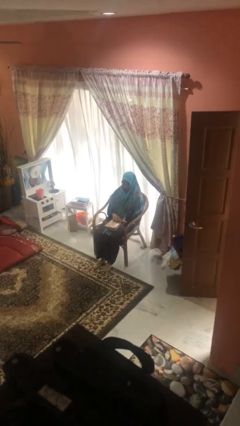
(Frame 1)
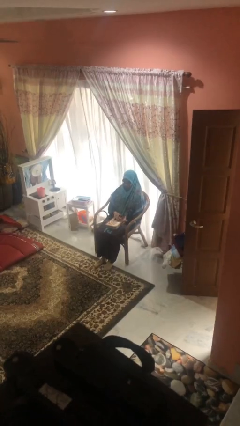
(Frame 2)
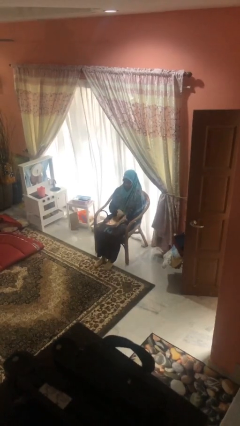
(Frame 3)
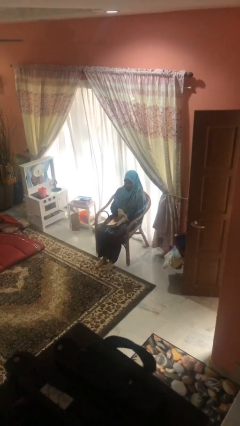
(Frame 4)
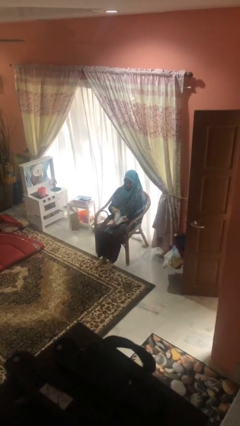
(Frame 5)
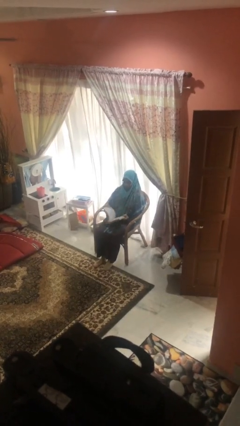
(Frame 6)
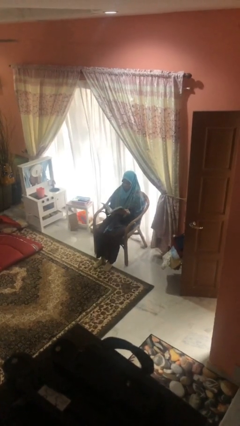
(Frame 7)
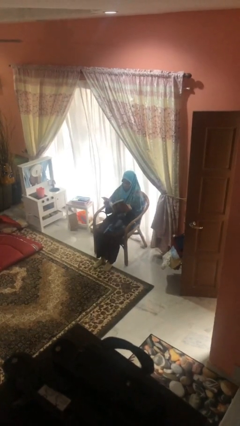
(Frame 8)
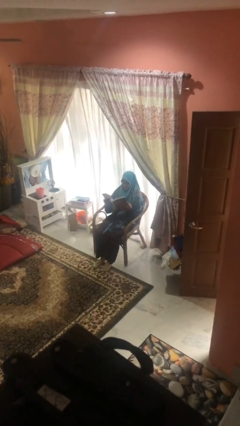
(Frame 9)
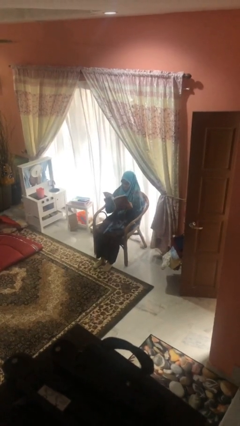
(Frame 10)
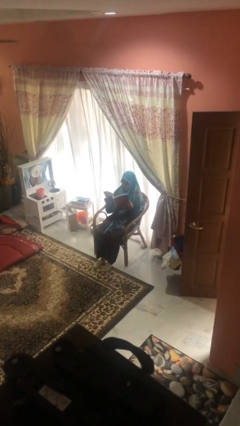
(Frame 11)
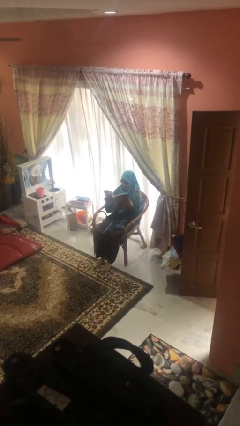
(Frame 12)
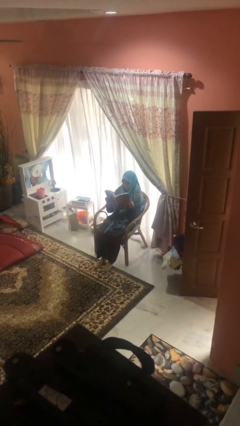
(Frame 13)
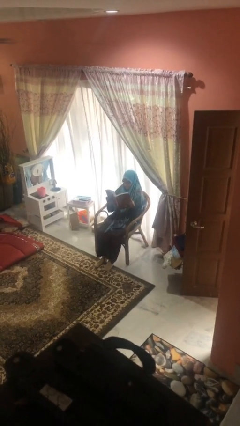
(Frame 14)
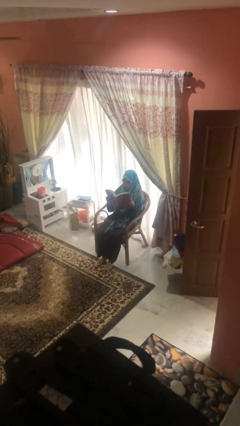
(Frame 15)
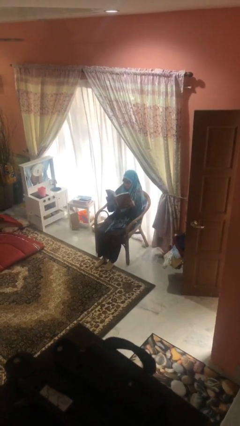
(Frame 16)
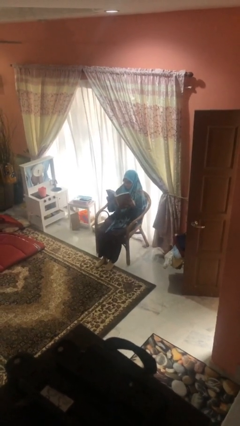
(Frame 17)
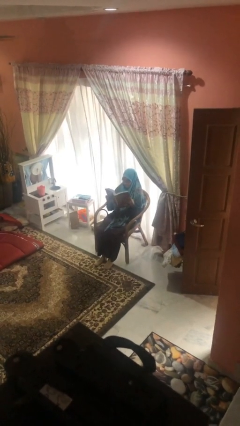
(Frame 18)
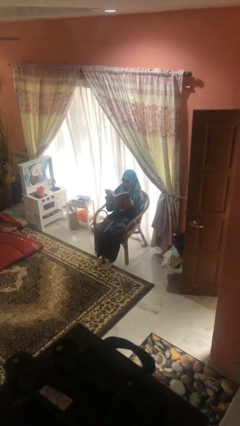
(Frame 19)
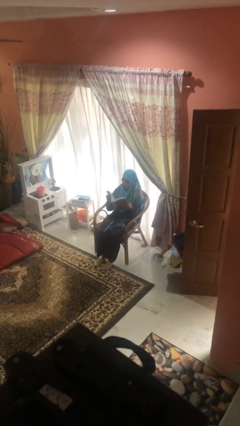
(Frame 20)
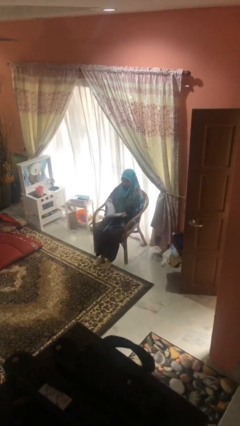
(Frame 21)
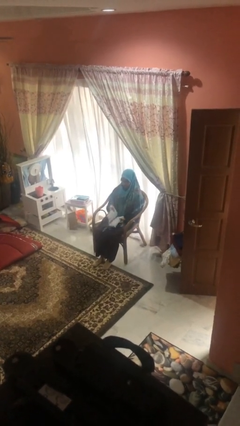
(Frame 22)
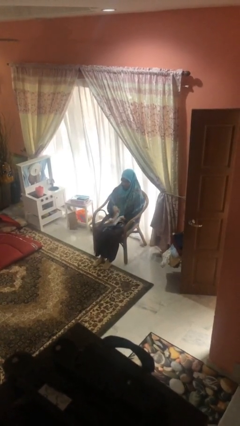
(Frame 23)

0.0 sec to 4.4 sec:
person reads document

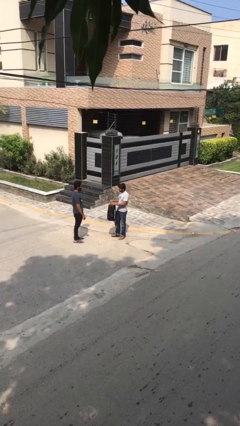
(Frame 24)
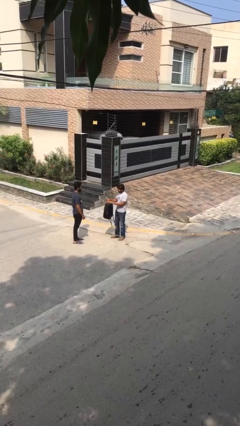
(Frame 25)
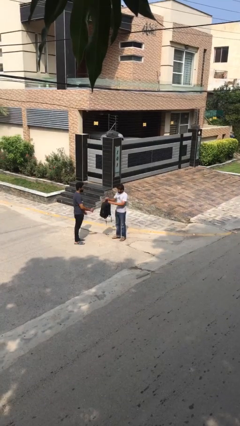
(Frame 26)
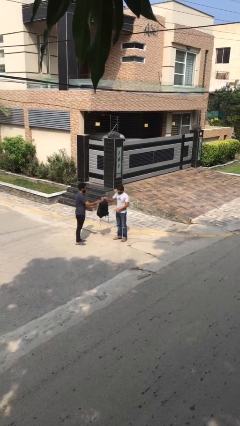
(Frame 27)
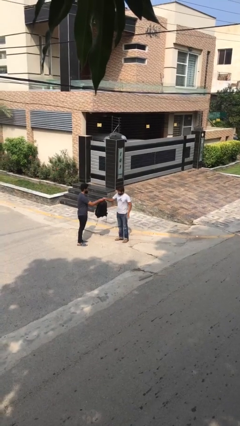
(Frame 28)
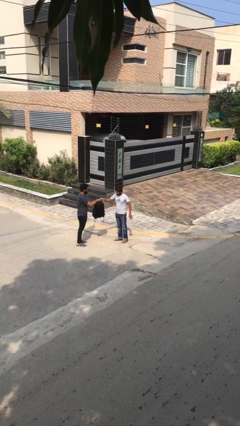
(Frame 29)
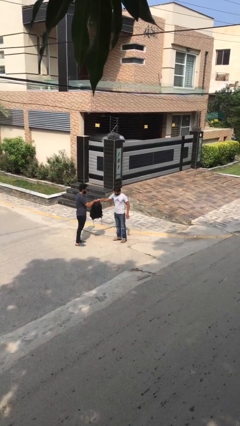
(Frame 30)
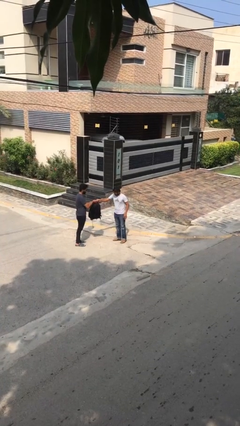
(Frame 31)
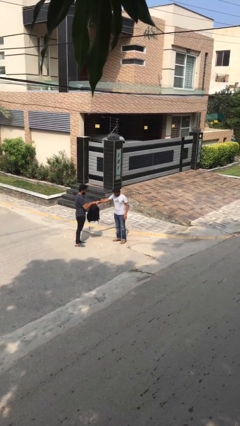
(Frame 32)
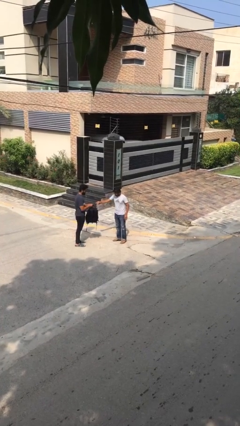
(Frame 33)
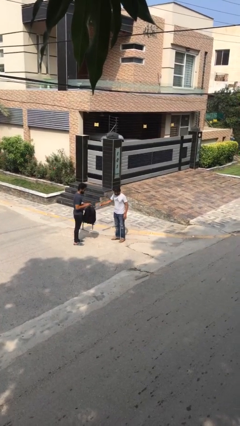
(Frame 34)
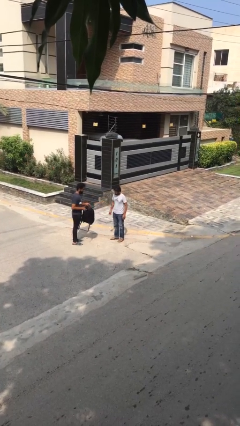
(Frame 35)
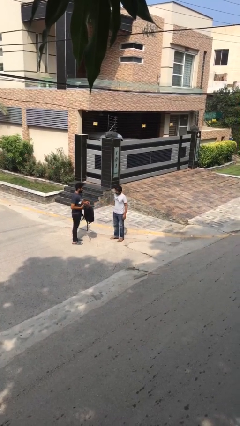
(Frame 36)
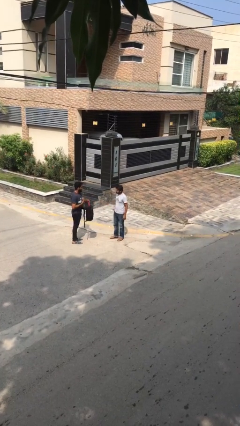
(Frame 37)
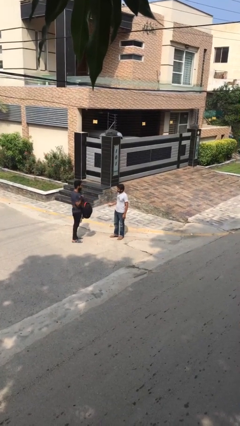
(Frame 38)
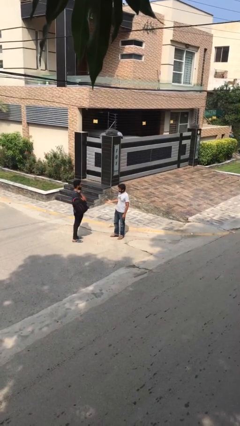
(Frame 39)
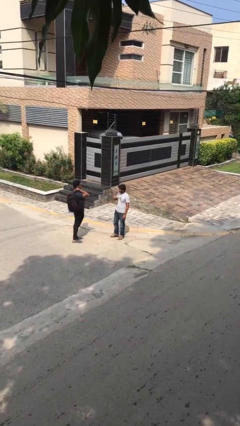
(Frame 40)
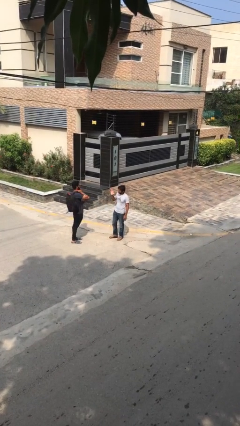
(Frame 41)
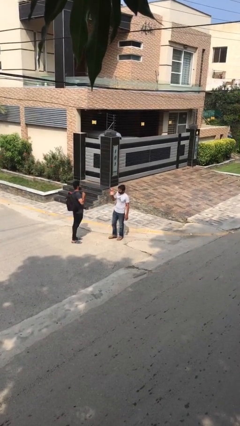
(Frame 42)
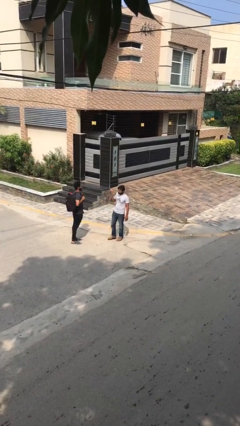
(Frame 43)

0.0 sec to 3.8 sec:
person transfers object to person

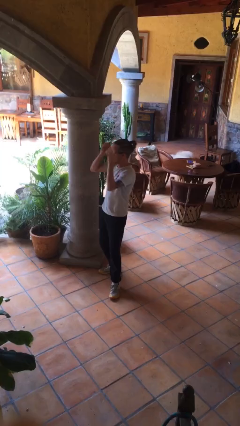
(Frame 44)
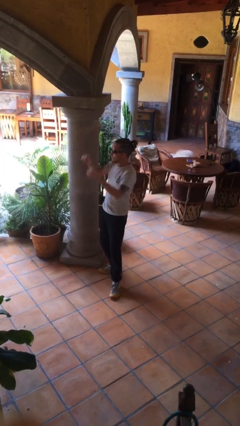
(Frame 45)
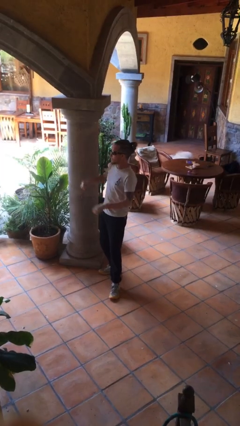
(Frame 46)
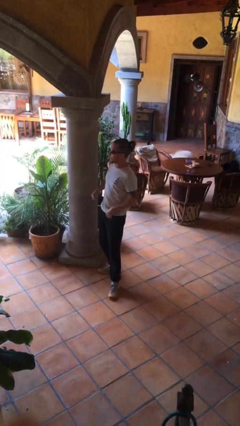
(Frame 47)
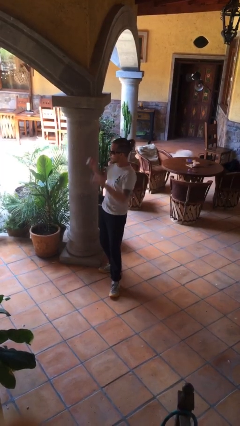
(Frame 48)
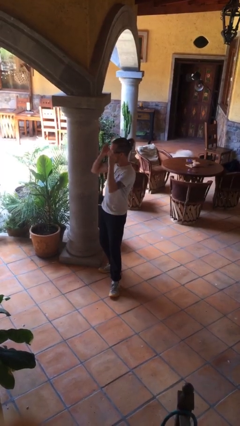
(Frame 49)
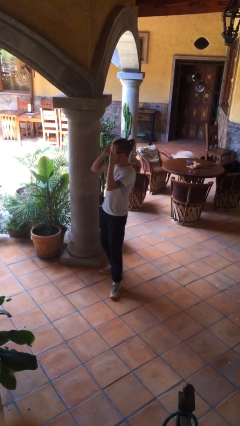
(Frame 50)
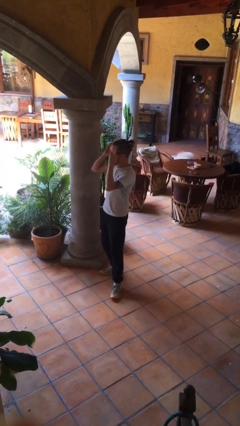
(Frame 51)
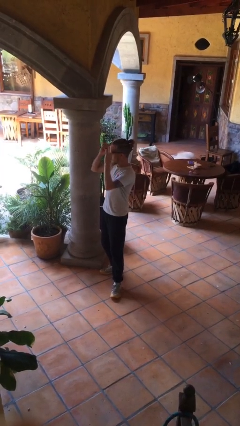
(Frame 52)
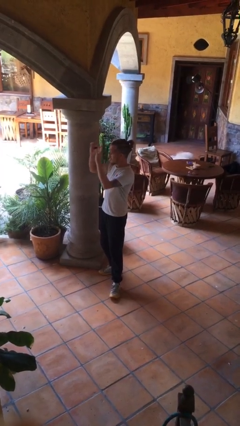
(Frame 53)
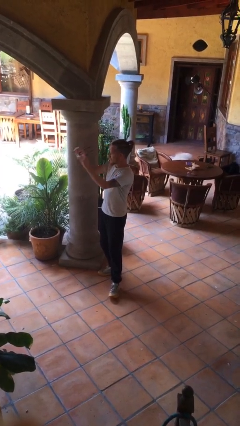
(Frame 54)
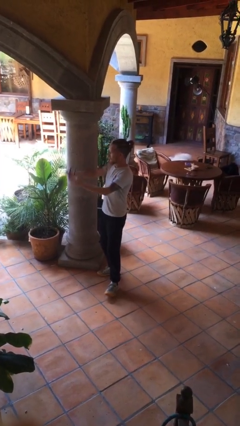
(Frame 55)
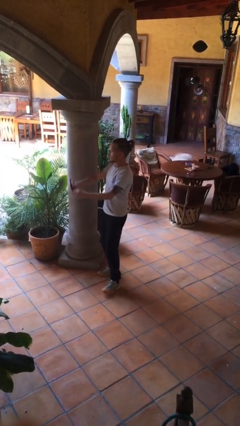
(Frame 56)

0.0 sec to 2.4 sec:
person takes off sunglasses

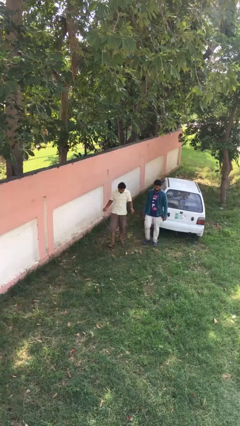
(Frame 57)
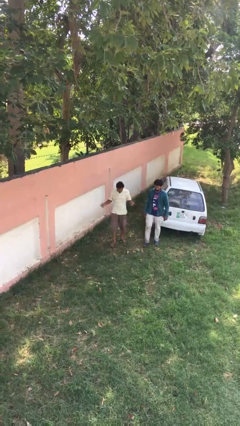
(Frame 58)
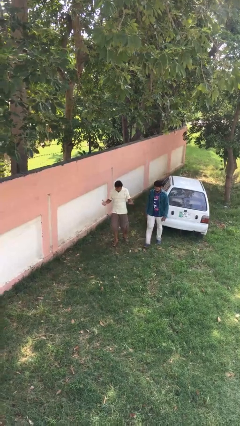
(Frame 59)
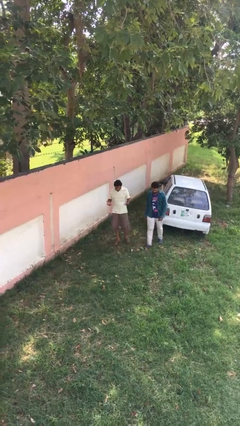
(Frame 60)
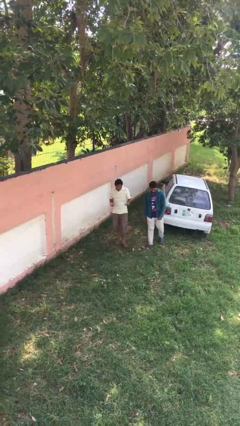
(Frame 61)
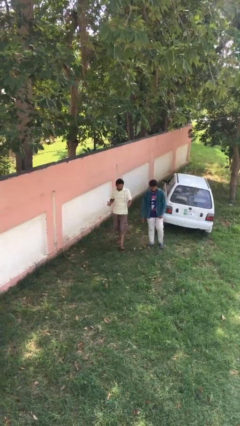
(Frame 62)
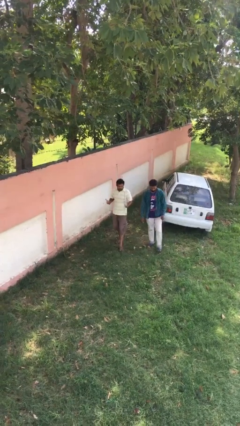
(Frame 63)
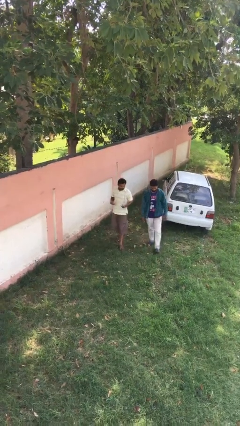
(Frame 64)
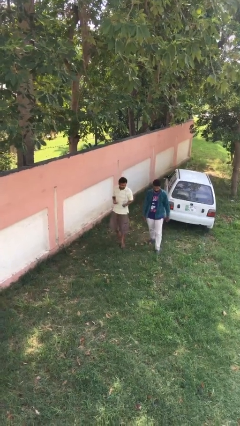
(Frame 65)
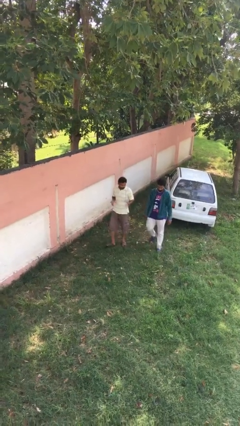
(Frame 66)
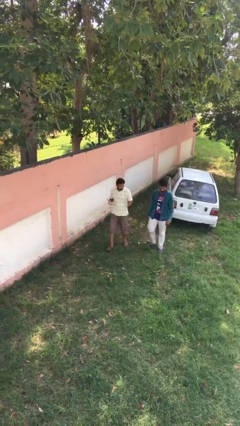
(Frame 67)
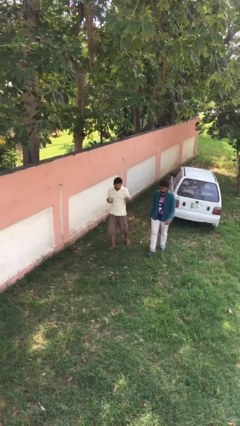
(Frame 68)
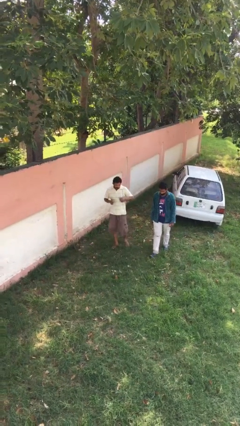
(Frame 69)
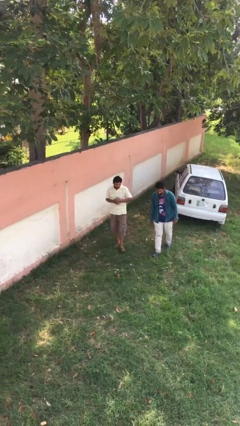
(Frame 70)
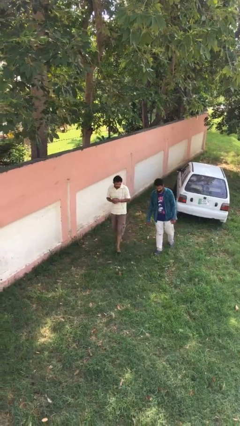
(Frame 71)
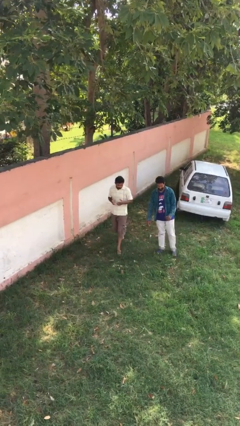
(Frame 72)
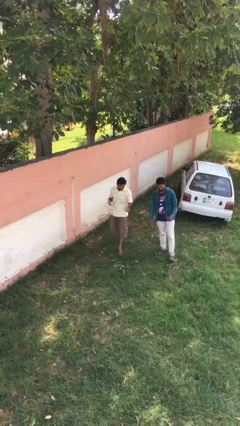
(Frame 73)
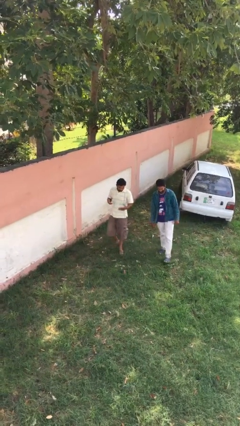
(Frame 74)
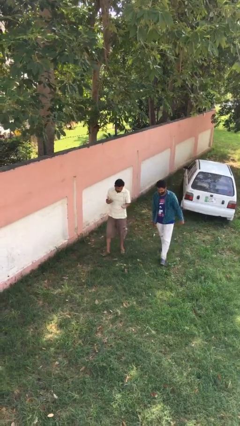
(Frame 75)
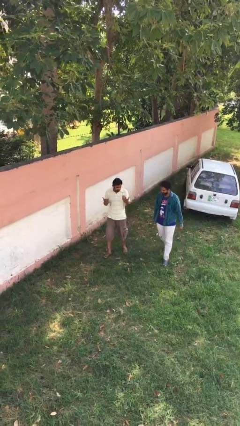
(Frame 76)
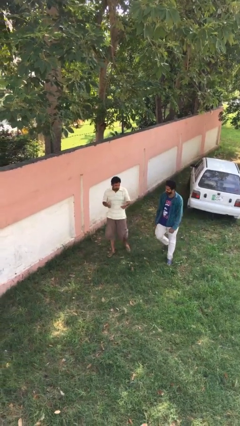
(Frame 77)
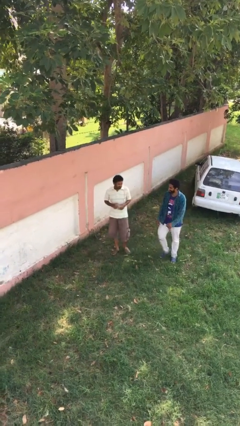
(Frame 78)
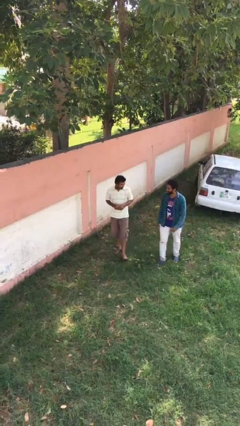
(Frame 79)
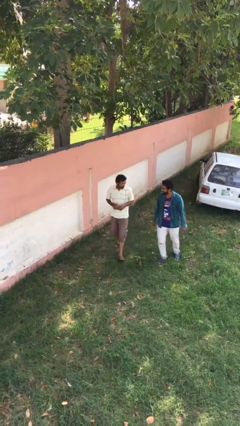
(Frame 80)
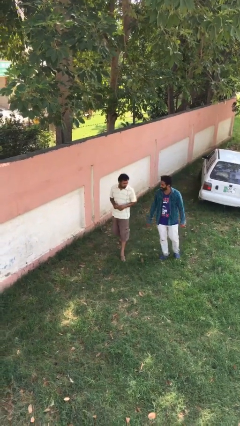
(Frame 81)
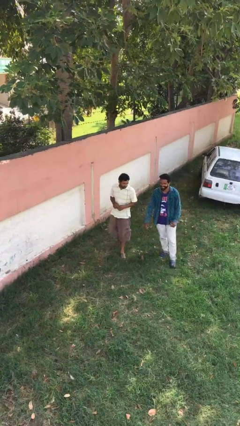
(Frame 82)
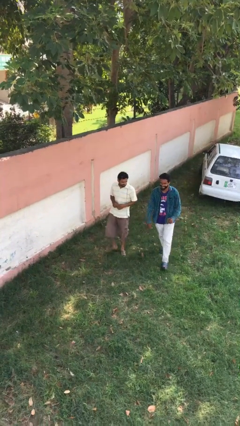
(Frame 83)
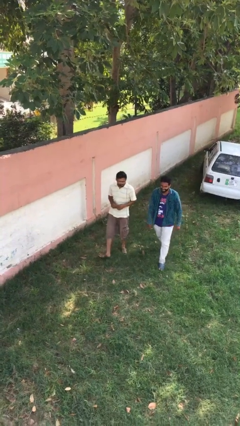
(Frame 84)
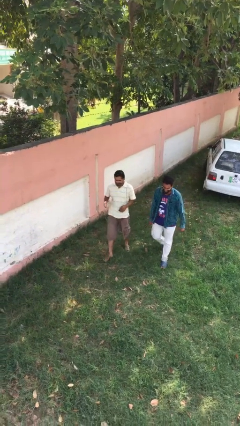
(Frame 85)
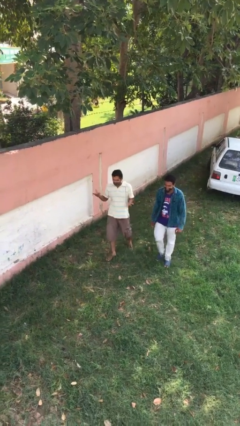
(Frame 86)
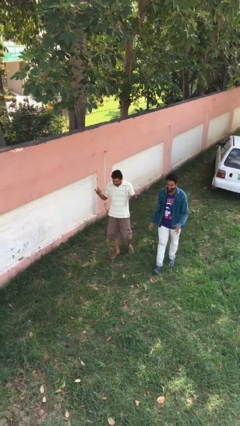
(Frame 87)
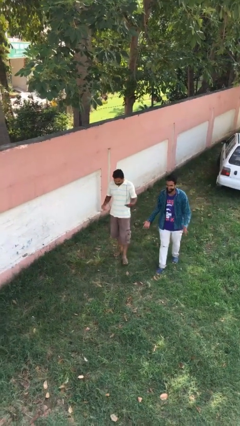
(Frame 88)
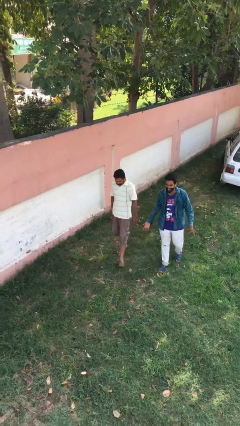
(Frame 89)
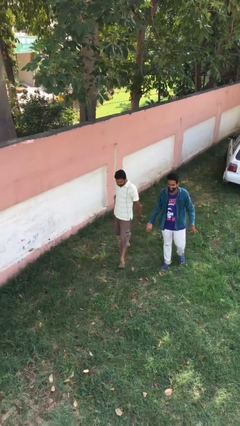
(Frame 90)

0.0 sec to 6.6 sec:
person talks to person

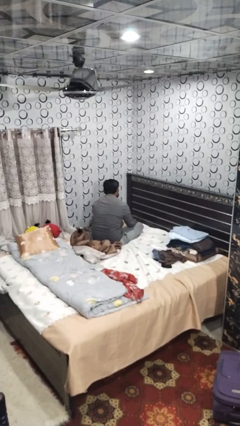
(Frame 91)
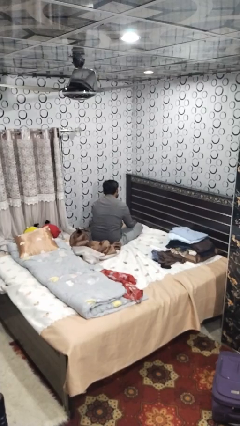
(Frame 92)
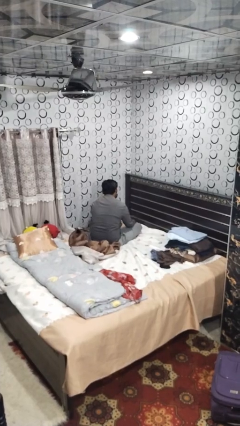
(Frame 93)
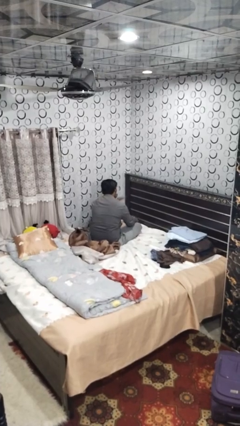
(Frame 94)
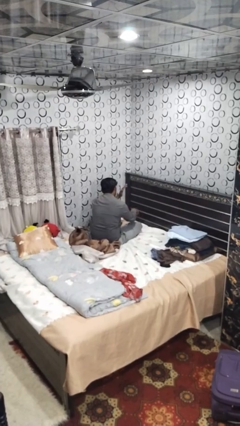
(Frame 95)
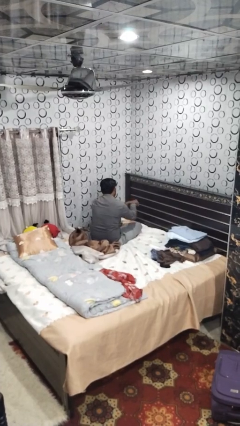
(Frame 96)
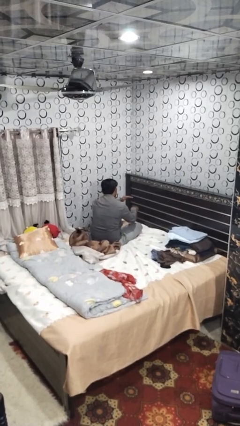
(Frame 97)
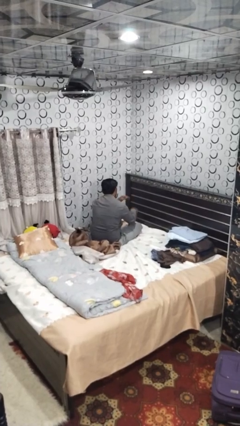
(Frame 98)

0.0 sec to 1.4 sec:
person swats bug
